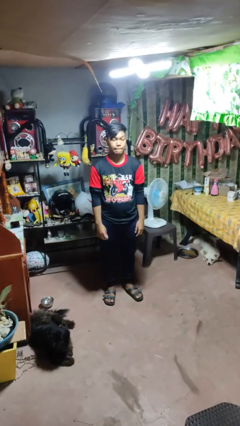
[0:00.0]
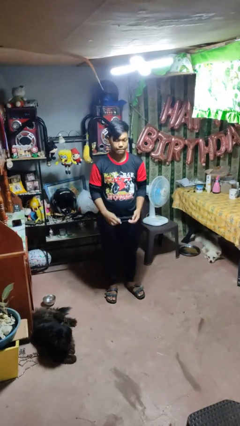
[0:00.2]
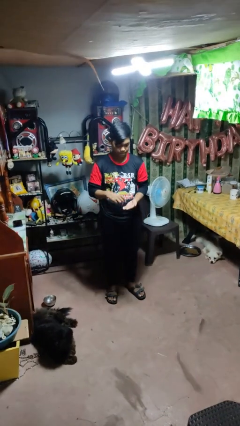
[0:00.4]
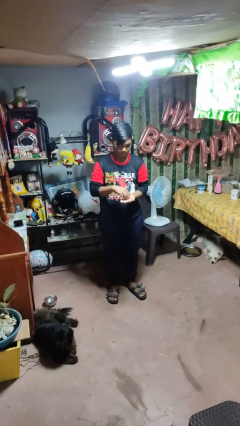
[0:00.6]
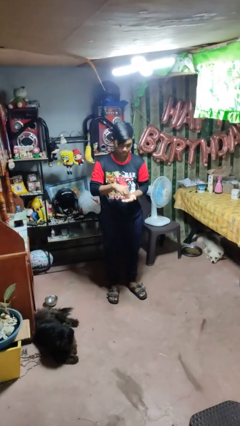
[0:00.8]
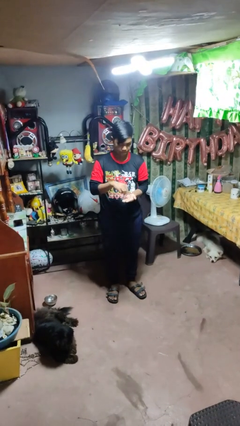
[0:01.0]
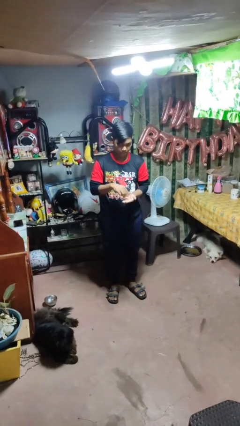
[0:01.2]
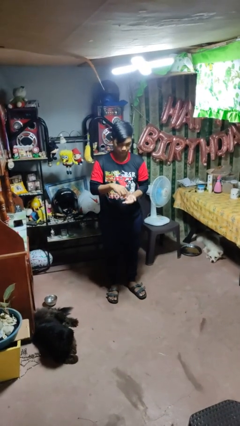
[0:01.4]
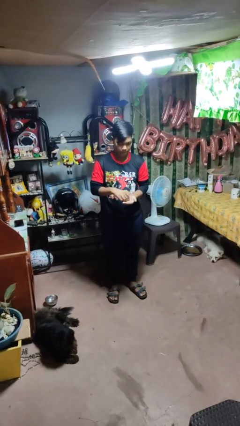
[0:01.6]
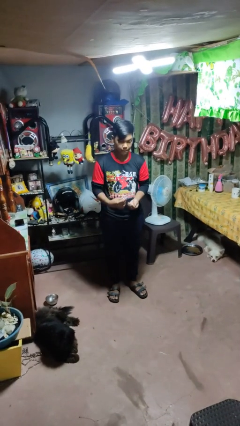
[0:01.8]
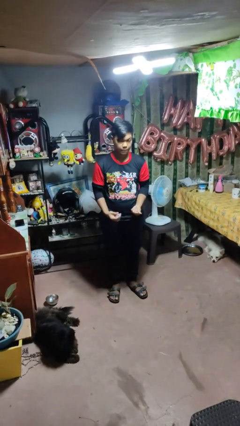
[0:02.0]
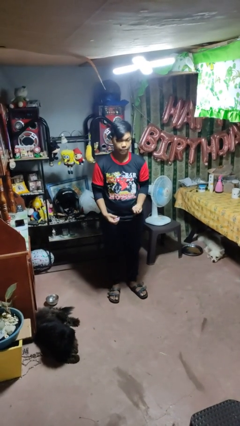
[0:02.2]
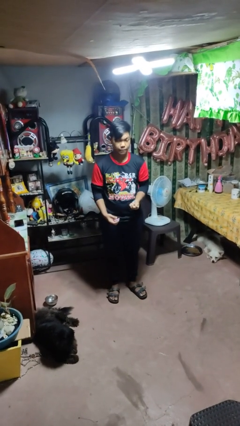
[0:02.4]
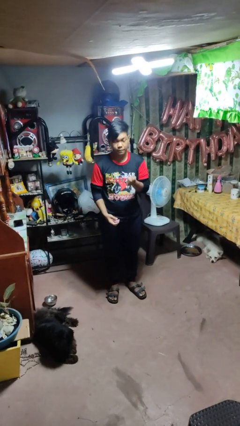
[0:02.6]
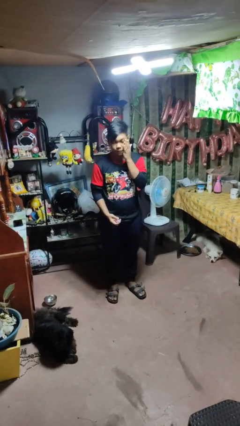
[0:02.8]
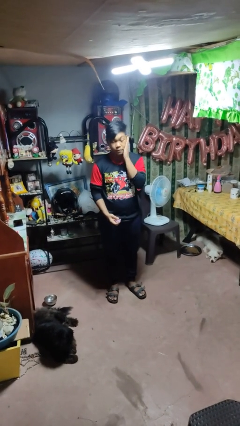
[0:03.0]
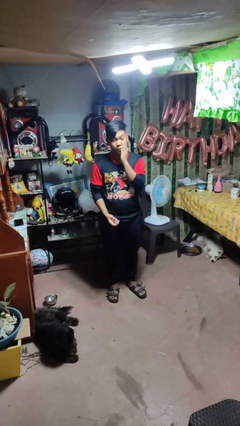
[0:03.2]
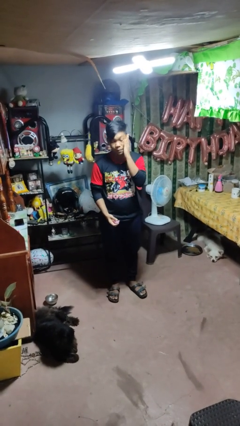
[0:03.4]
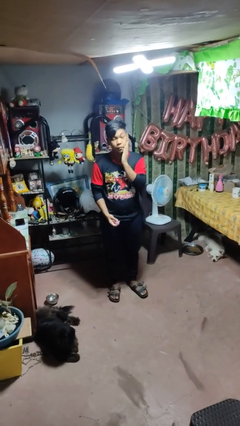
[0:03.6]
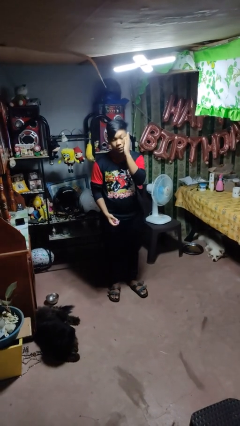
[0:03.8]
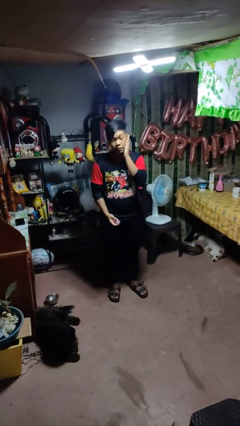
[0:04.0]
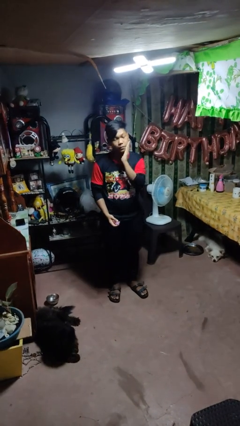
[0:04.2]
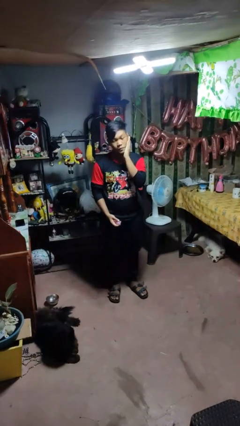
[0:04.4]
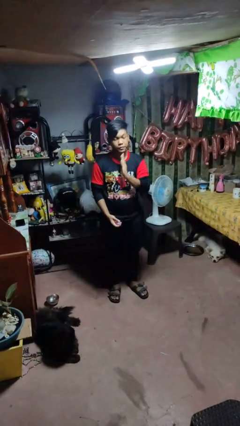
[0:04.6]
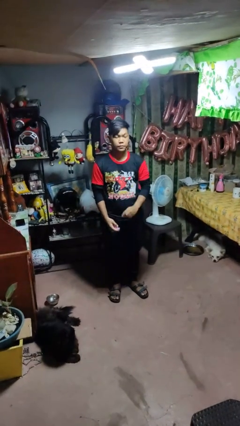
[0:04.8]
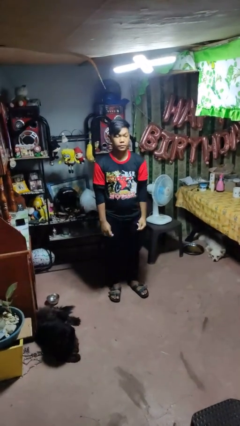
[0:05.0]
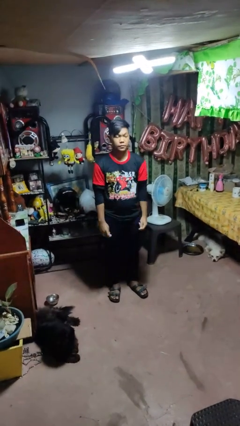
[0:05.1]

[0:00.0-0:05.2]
person applies facial moisturizer

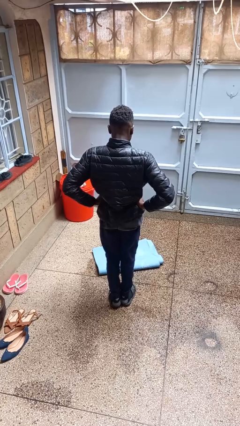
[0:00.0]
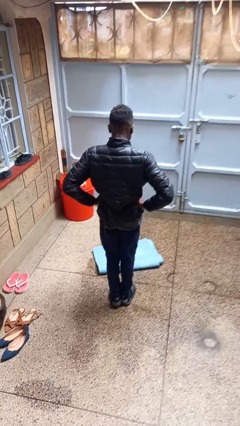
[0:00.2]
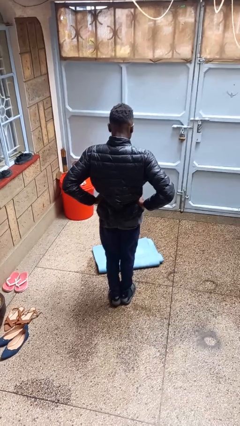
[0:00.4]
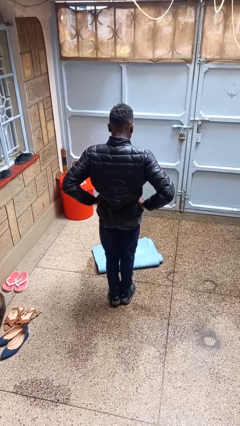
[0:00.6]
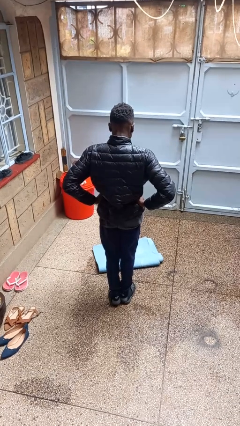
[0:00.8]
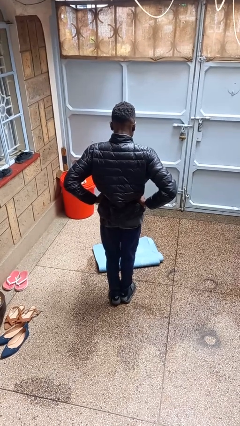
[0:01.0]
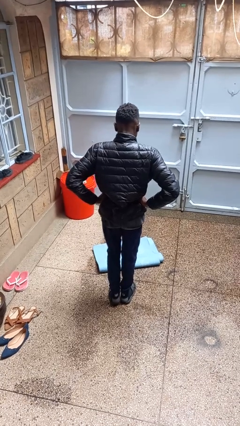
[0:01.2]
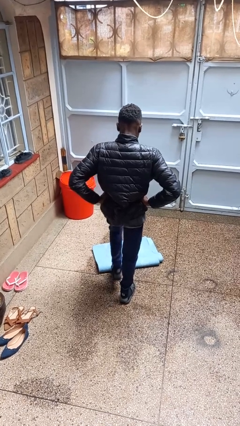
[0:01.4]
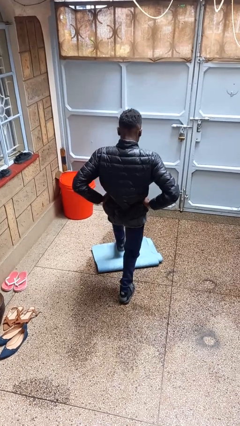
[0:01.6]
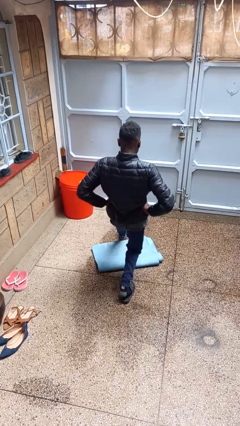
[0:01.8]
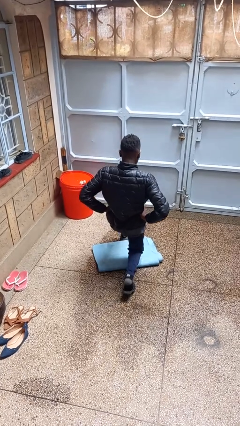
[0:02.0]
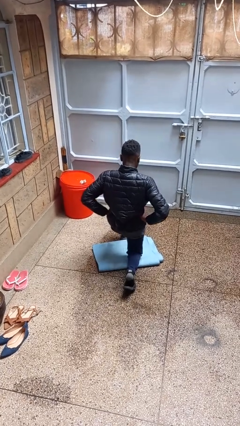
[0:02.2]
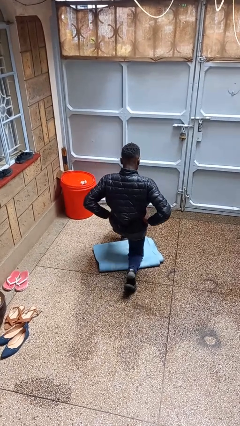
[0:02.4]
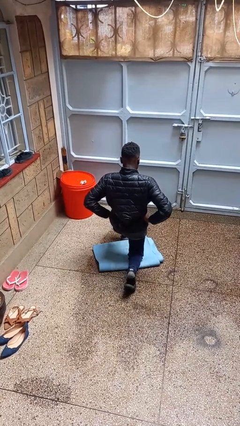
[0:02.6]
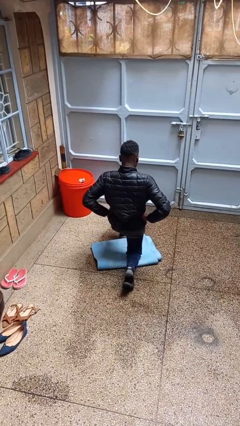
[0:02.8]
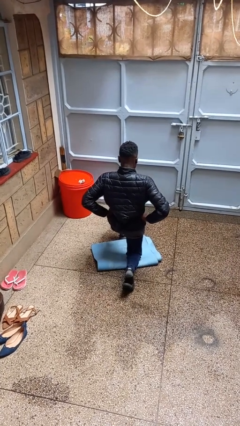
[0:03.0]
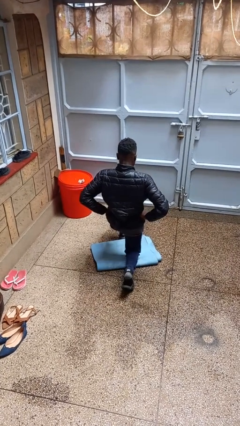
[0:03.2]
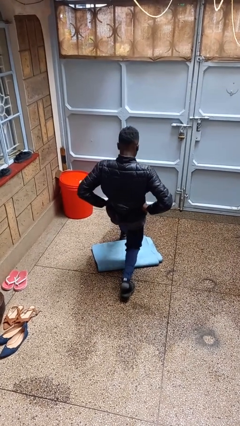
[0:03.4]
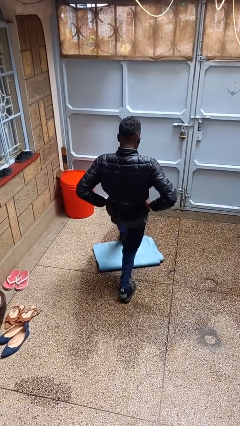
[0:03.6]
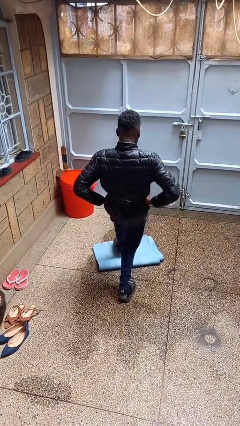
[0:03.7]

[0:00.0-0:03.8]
person exercises with lunges

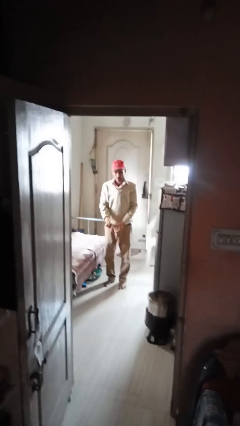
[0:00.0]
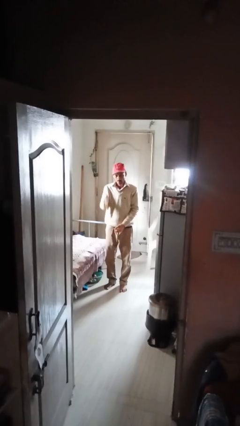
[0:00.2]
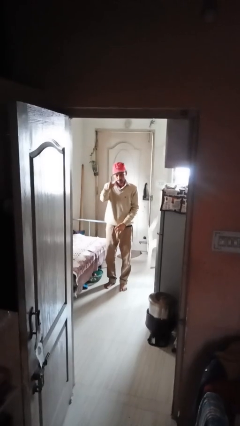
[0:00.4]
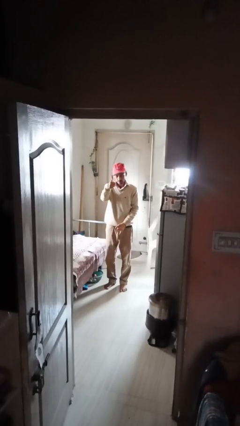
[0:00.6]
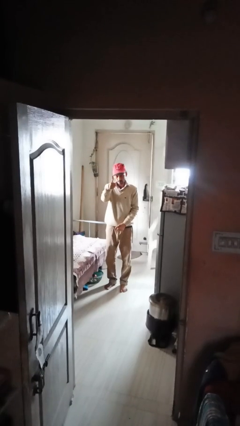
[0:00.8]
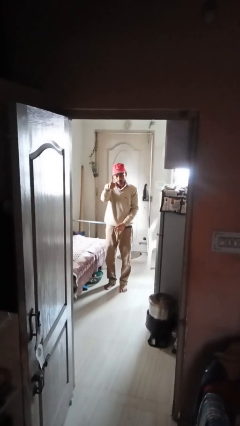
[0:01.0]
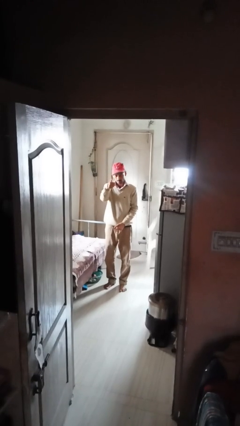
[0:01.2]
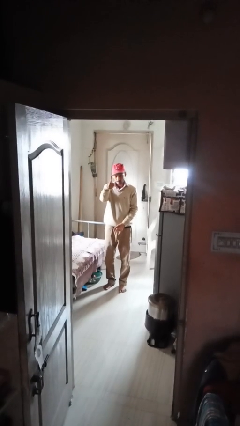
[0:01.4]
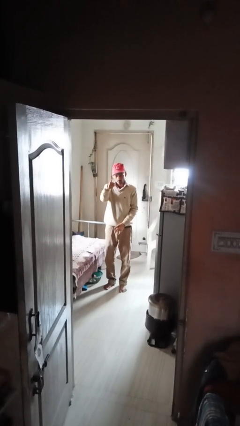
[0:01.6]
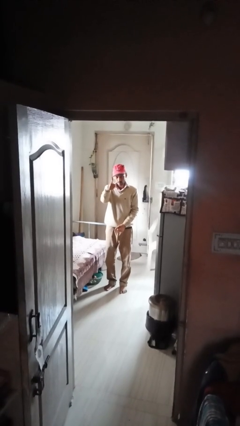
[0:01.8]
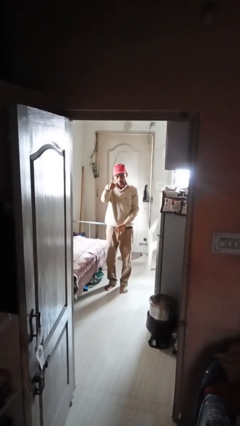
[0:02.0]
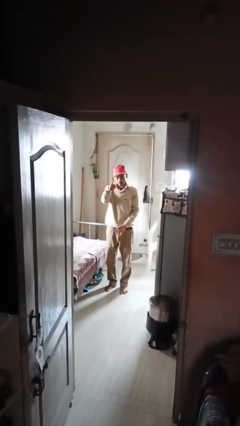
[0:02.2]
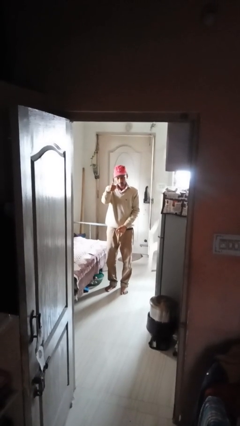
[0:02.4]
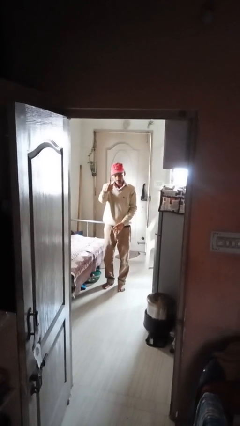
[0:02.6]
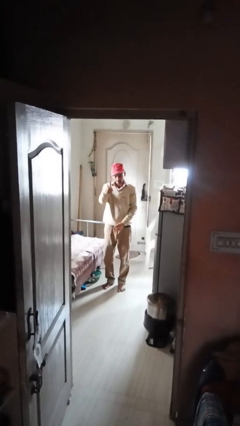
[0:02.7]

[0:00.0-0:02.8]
person gestures thumbs up

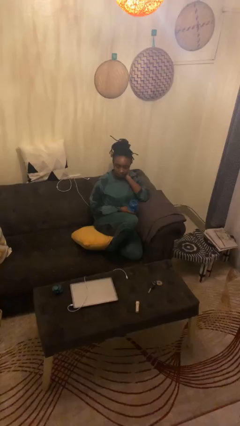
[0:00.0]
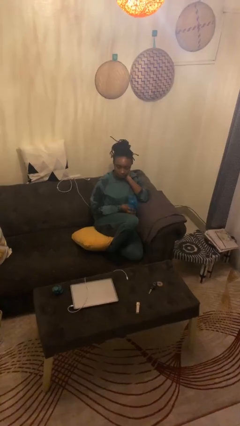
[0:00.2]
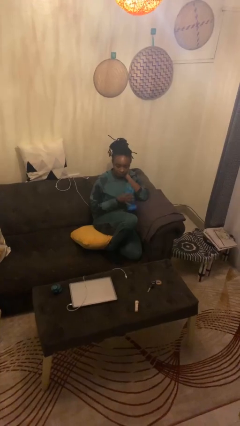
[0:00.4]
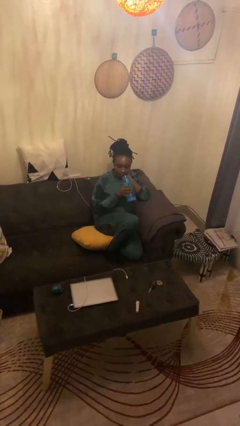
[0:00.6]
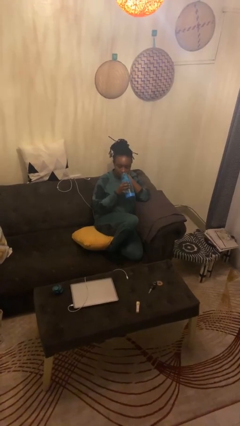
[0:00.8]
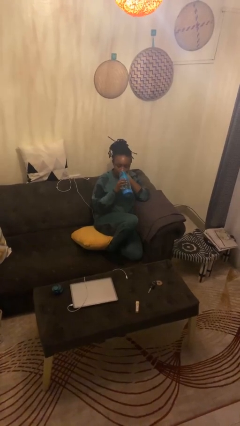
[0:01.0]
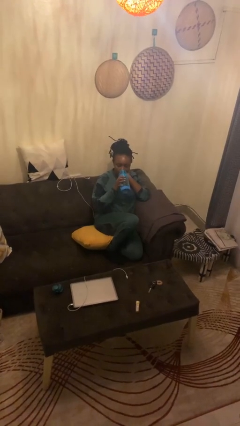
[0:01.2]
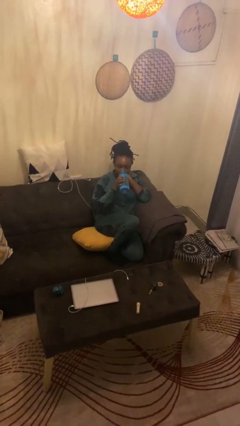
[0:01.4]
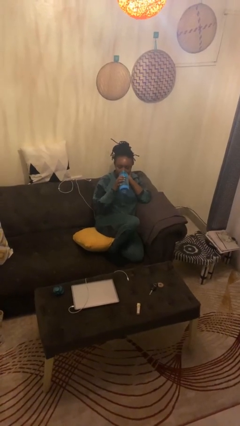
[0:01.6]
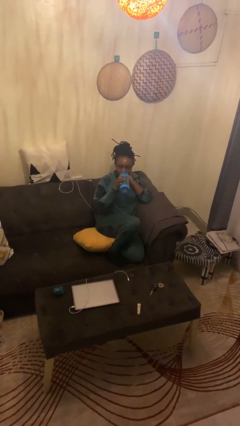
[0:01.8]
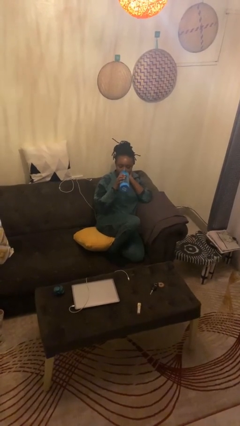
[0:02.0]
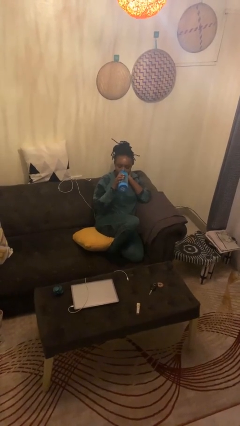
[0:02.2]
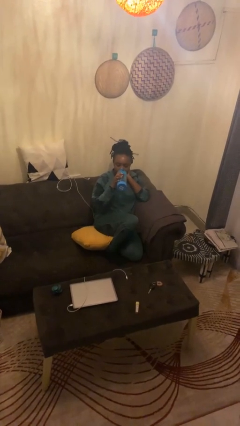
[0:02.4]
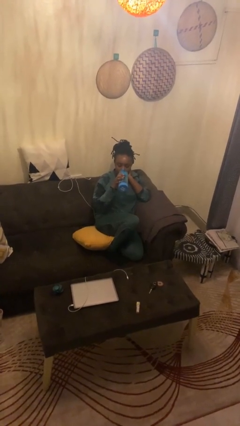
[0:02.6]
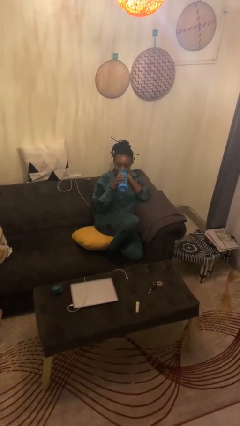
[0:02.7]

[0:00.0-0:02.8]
person drinks from bottle

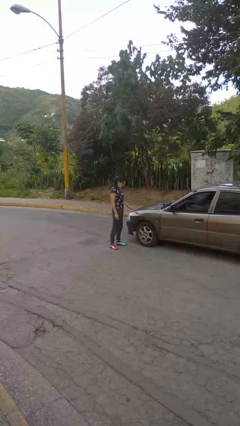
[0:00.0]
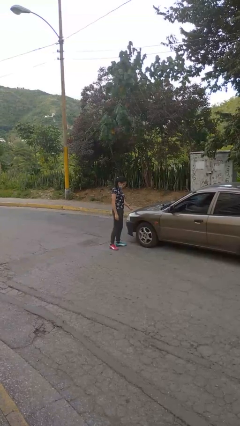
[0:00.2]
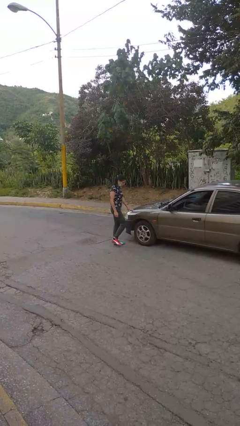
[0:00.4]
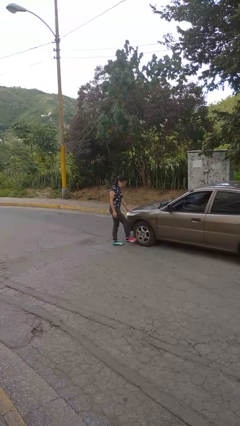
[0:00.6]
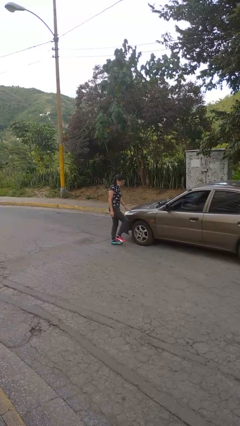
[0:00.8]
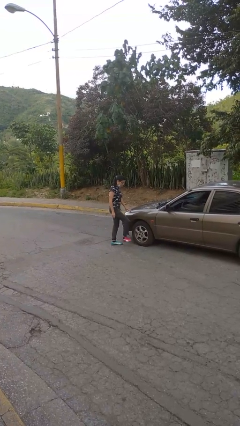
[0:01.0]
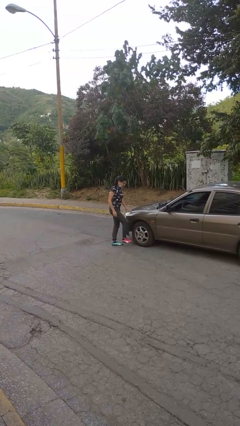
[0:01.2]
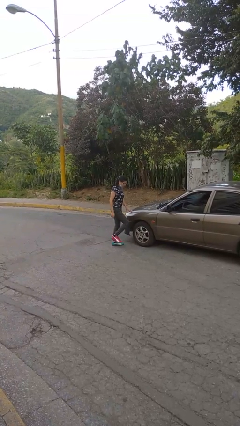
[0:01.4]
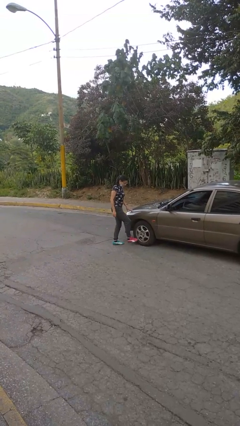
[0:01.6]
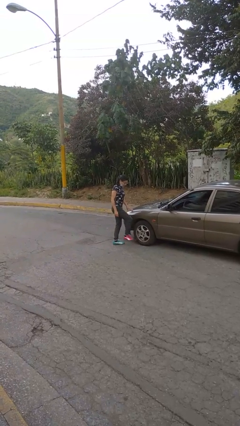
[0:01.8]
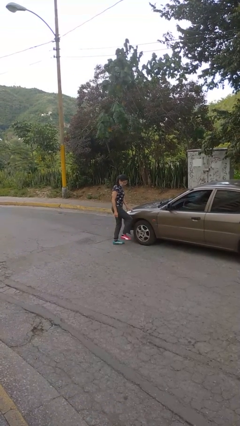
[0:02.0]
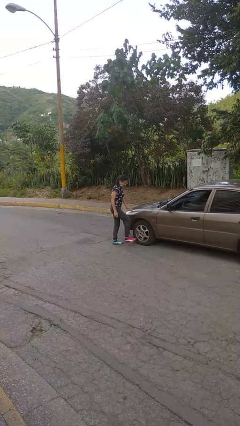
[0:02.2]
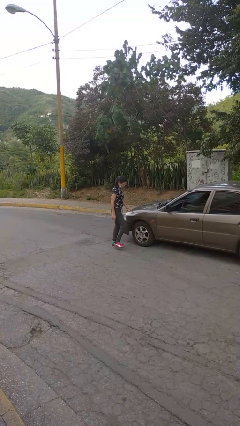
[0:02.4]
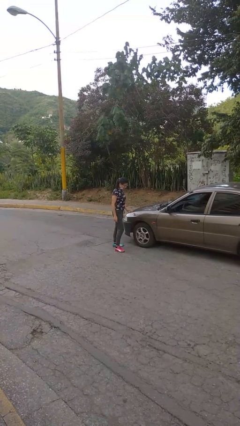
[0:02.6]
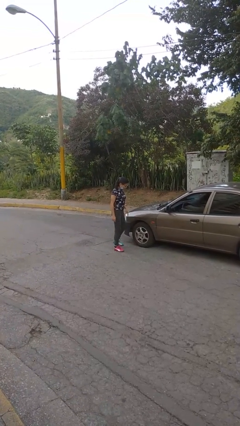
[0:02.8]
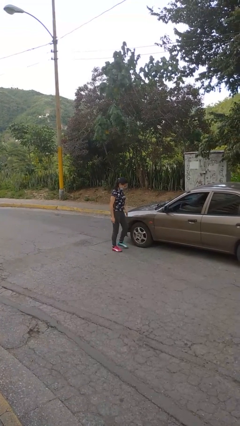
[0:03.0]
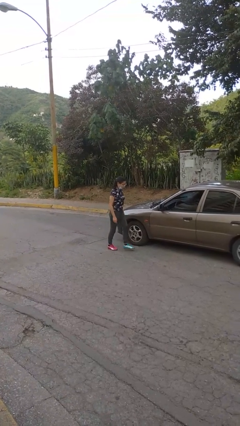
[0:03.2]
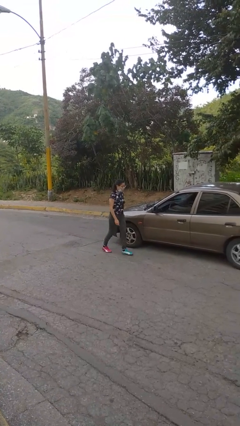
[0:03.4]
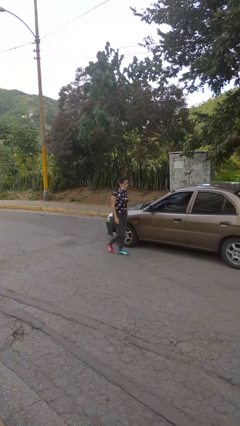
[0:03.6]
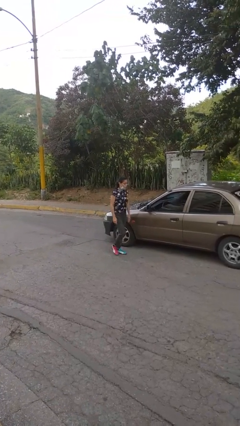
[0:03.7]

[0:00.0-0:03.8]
person kicks car tires
